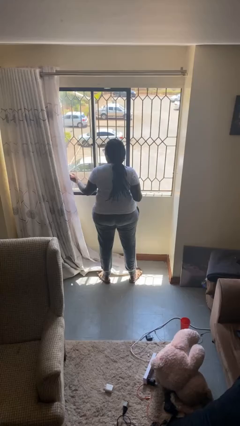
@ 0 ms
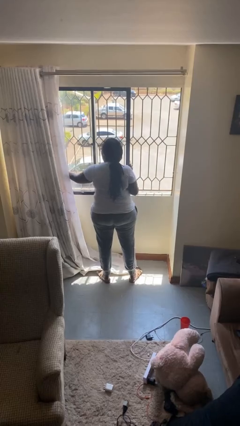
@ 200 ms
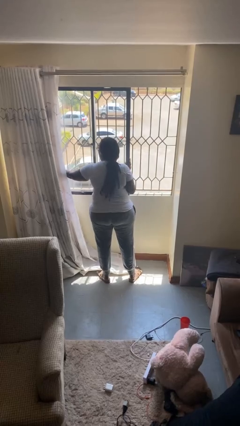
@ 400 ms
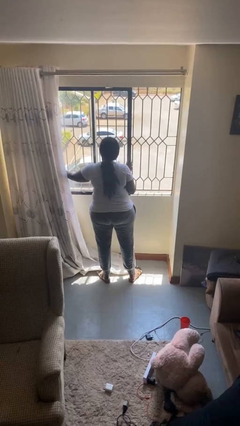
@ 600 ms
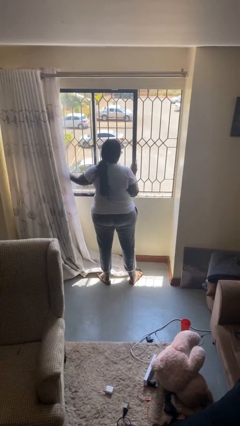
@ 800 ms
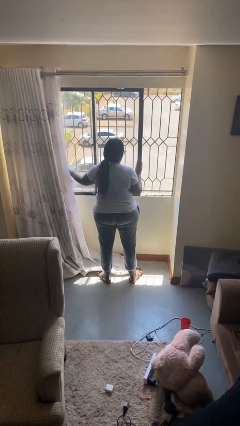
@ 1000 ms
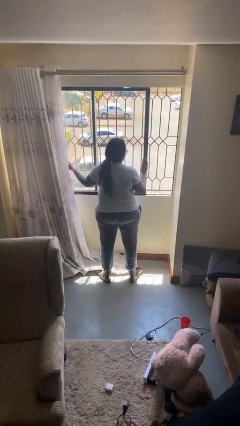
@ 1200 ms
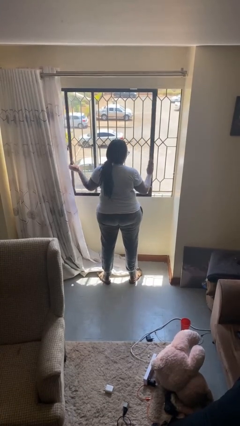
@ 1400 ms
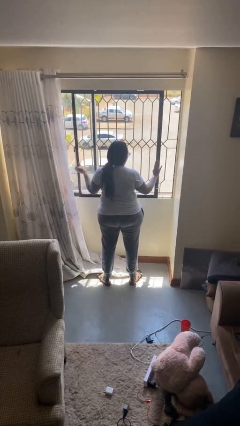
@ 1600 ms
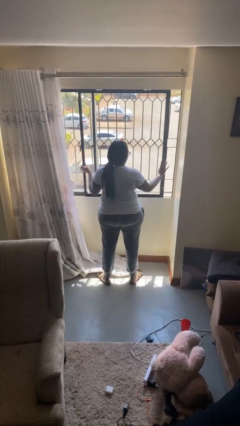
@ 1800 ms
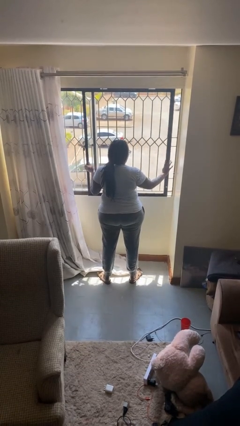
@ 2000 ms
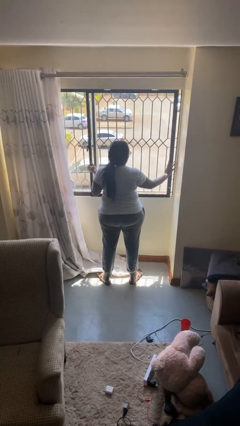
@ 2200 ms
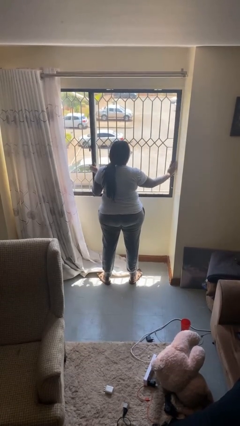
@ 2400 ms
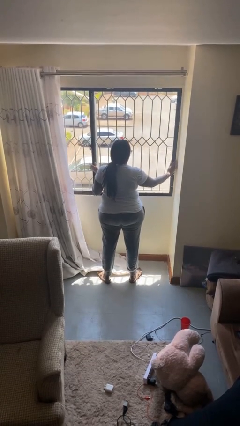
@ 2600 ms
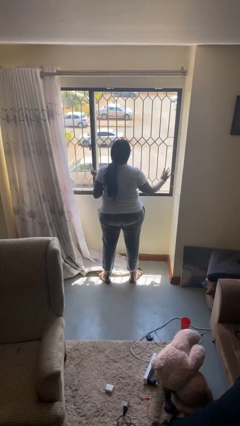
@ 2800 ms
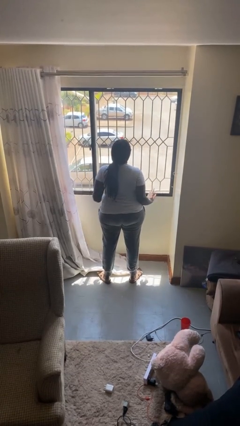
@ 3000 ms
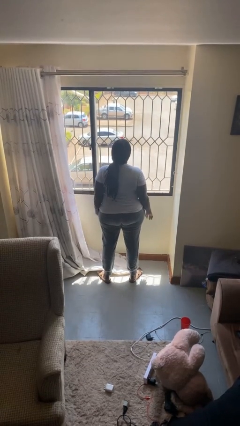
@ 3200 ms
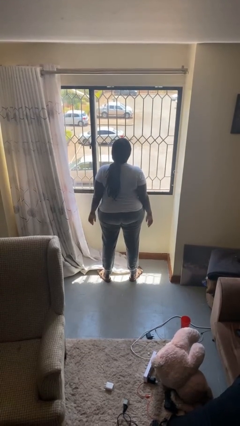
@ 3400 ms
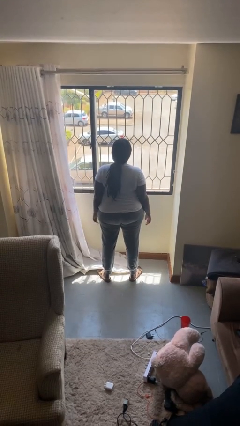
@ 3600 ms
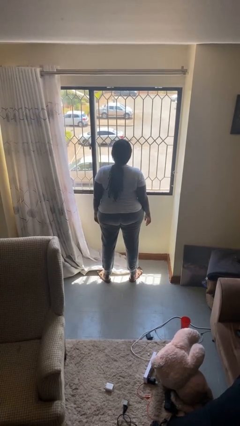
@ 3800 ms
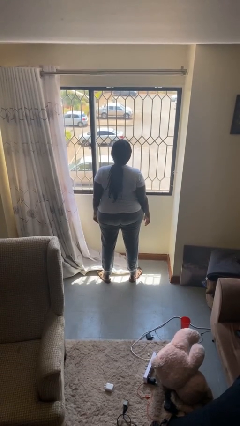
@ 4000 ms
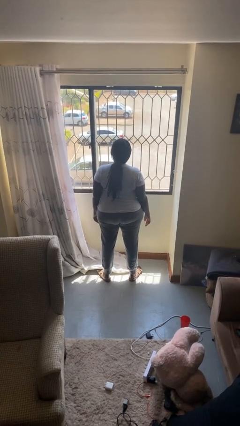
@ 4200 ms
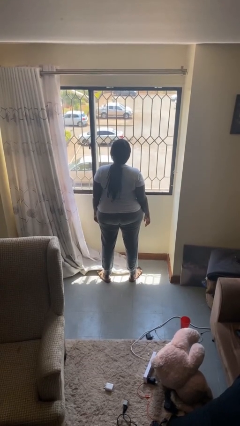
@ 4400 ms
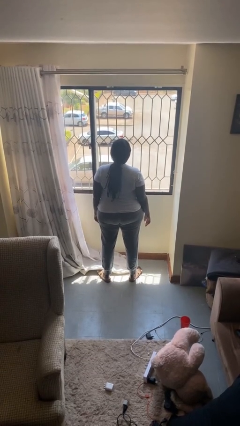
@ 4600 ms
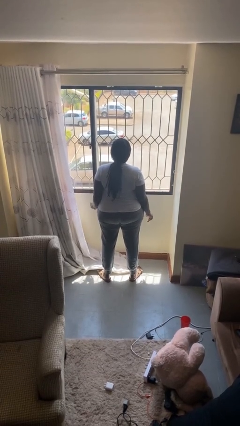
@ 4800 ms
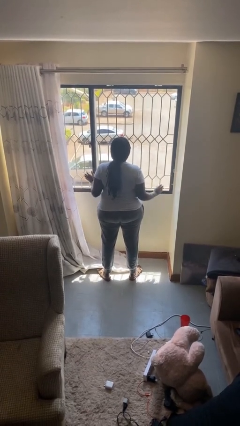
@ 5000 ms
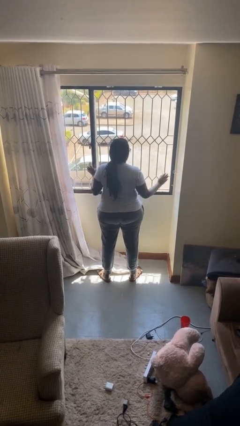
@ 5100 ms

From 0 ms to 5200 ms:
person closes home window

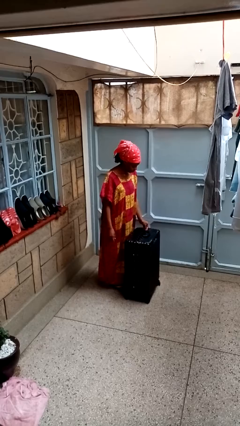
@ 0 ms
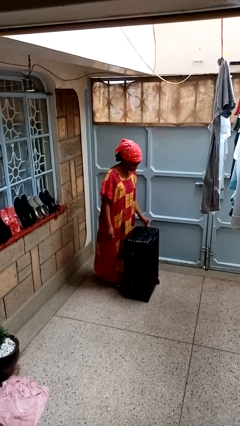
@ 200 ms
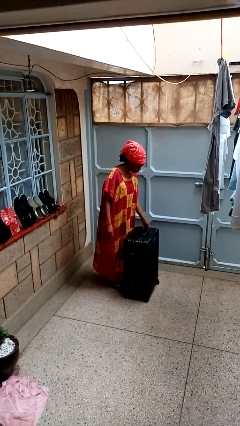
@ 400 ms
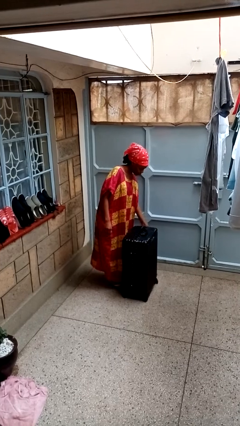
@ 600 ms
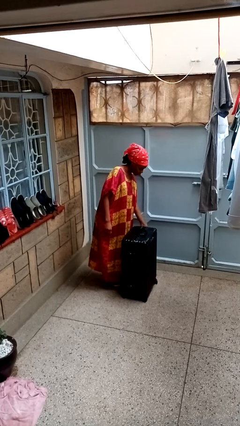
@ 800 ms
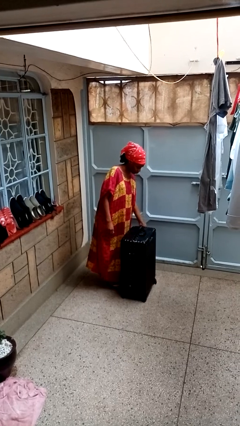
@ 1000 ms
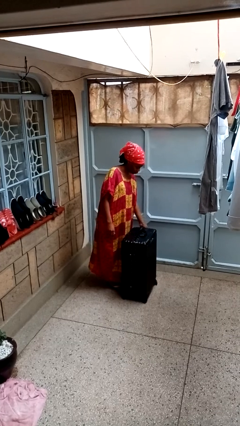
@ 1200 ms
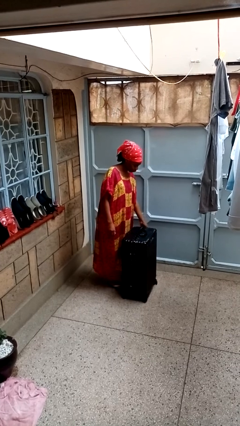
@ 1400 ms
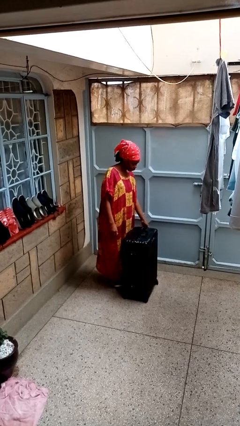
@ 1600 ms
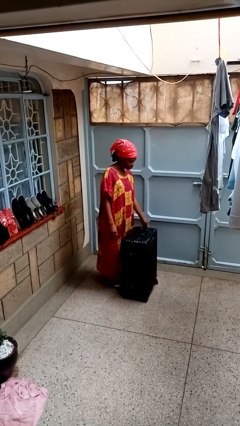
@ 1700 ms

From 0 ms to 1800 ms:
person closes suitcase

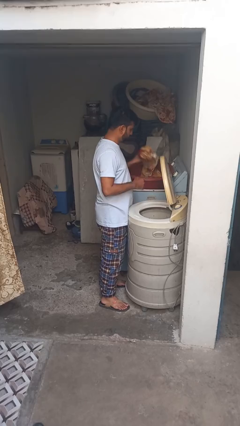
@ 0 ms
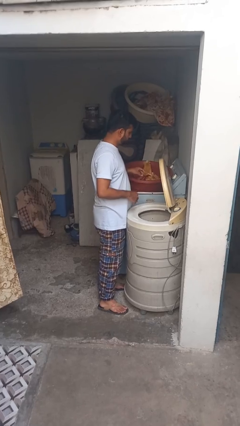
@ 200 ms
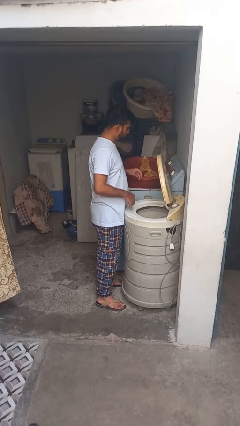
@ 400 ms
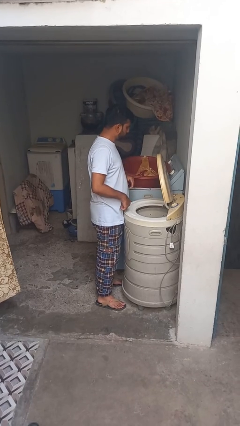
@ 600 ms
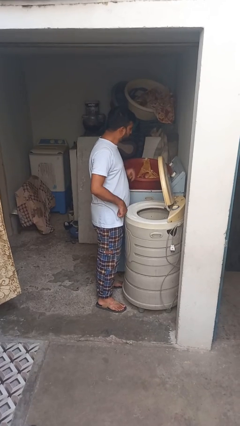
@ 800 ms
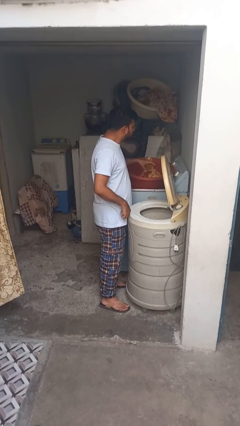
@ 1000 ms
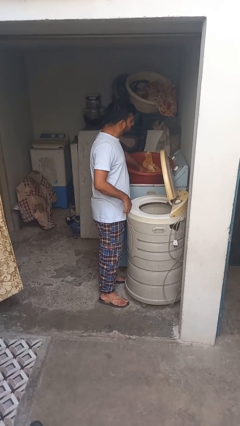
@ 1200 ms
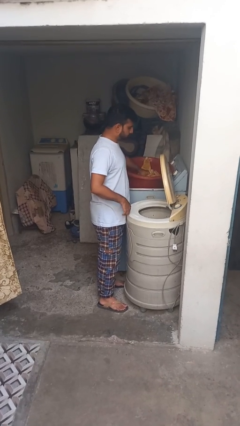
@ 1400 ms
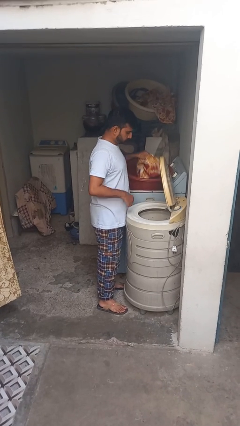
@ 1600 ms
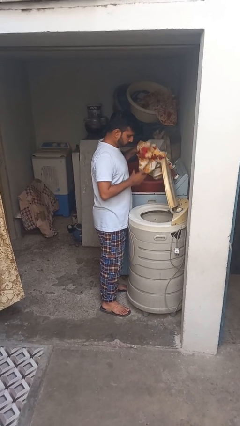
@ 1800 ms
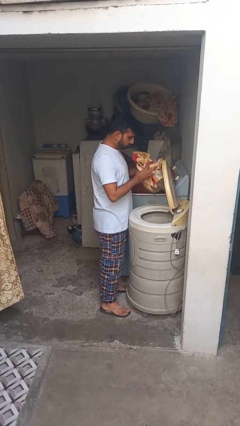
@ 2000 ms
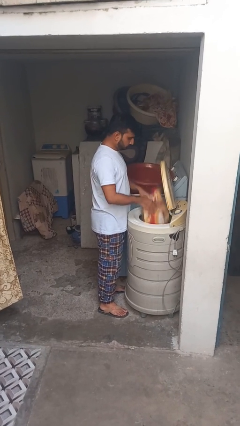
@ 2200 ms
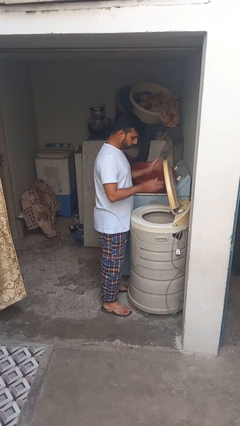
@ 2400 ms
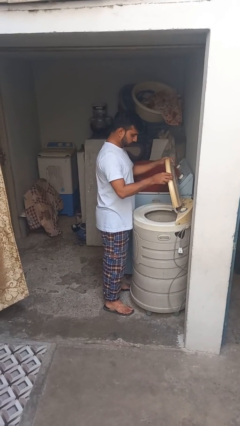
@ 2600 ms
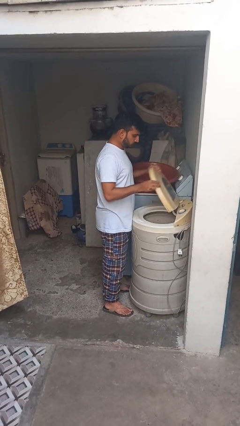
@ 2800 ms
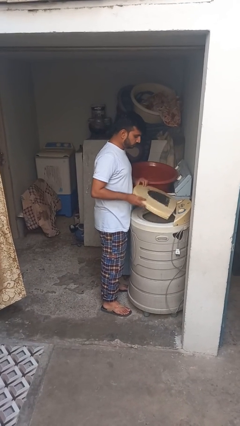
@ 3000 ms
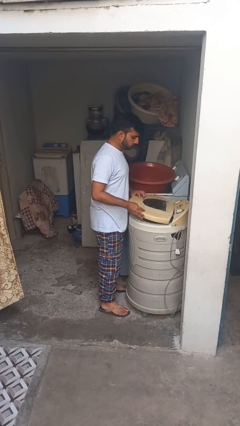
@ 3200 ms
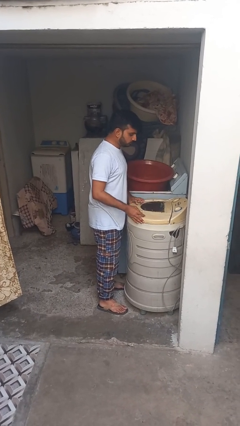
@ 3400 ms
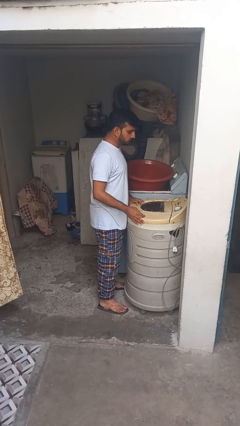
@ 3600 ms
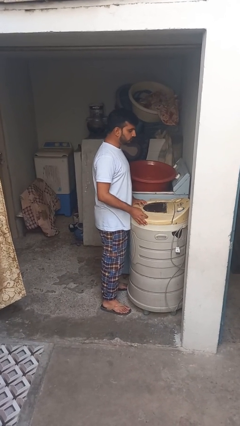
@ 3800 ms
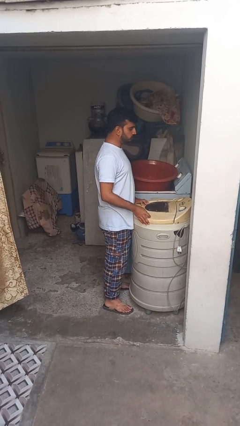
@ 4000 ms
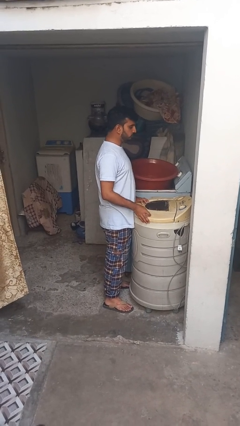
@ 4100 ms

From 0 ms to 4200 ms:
person loads clotheswasher

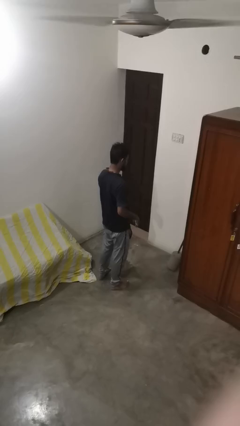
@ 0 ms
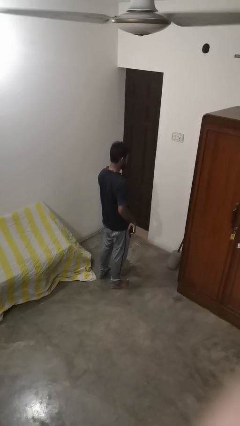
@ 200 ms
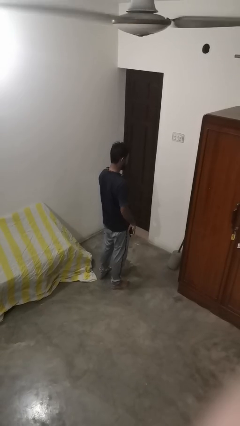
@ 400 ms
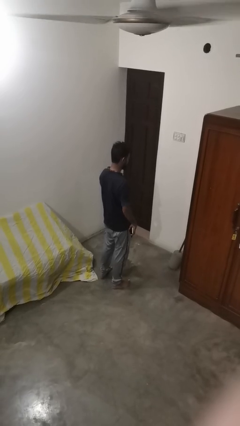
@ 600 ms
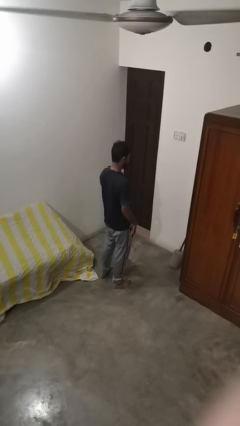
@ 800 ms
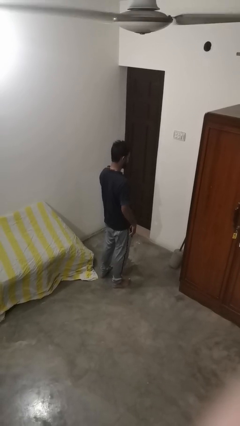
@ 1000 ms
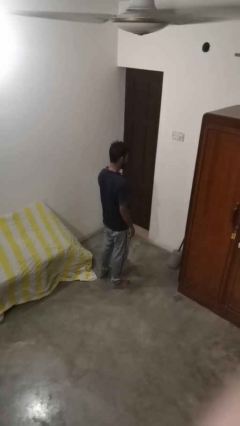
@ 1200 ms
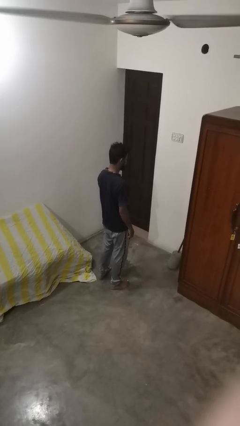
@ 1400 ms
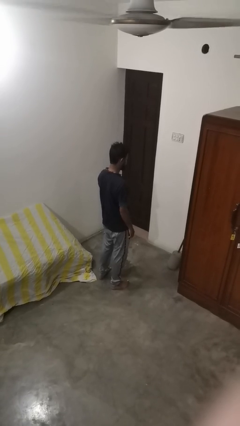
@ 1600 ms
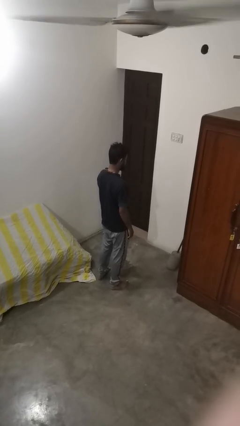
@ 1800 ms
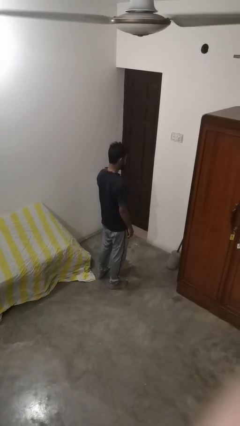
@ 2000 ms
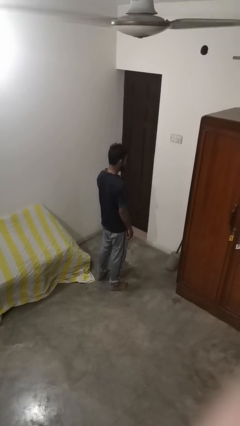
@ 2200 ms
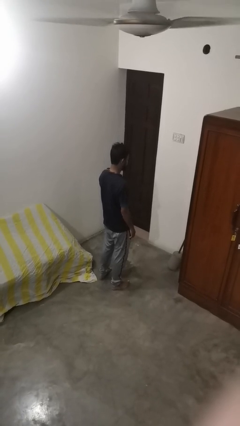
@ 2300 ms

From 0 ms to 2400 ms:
person puts phone into pocket

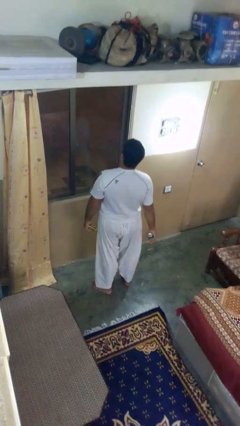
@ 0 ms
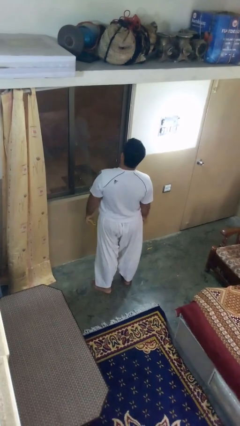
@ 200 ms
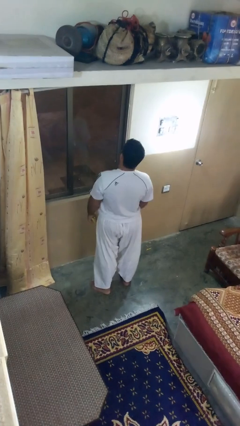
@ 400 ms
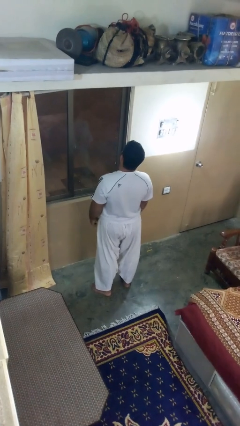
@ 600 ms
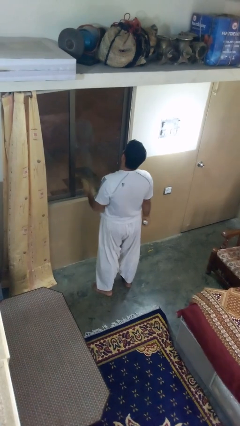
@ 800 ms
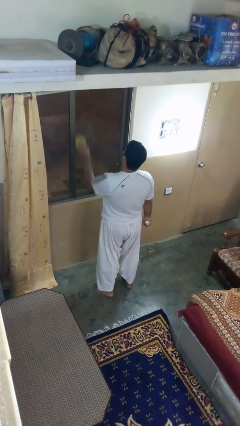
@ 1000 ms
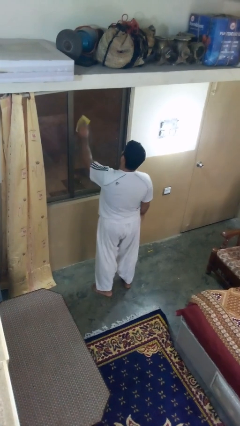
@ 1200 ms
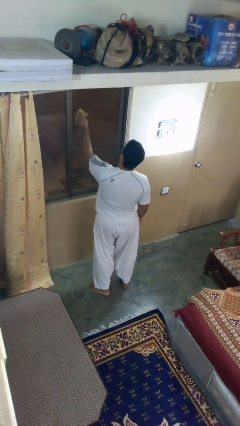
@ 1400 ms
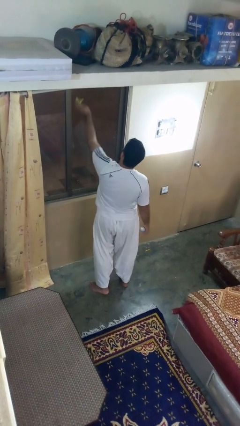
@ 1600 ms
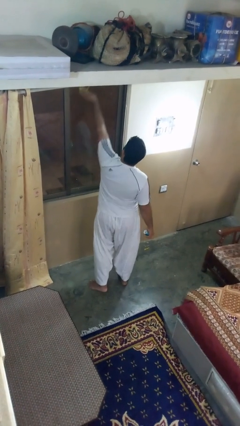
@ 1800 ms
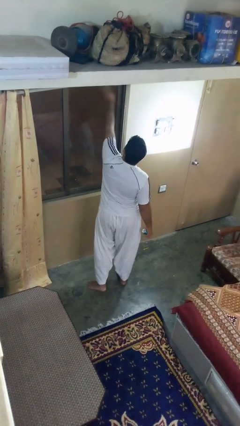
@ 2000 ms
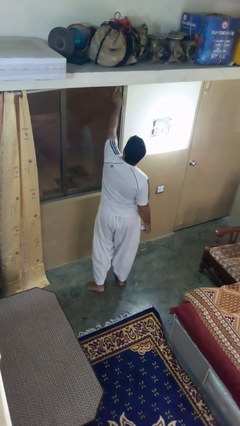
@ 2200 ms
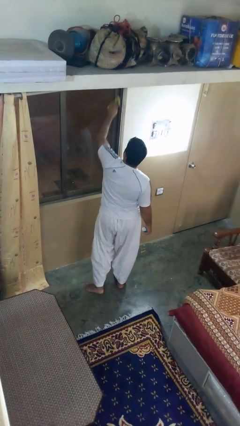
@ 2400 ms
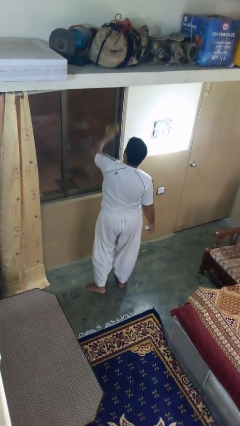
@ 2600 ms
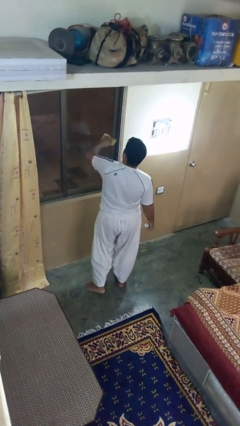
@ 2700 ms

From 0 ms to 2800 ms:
person washes window

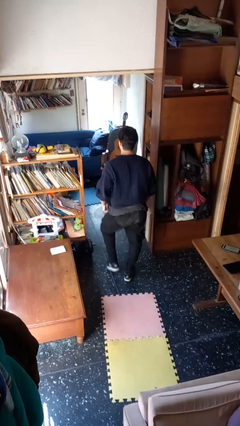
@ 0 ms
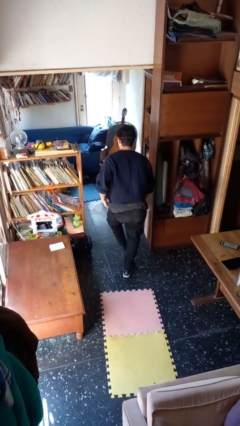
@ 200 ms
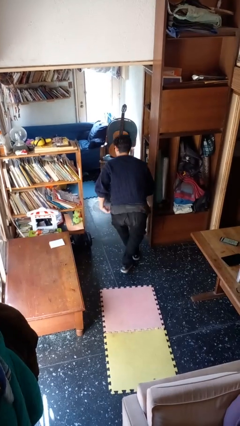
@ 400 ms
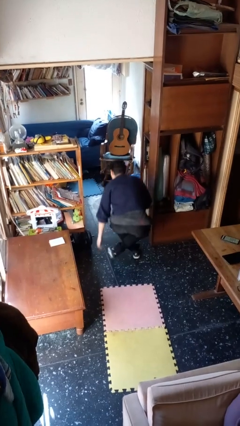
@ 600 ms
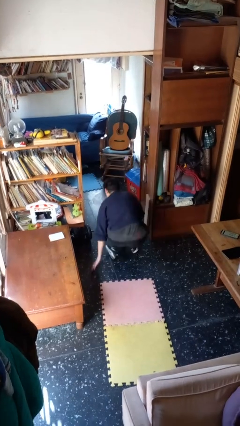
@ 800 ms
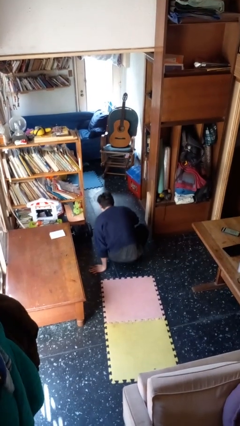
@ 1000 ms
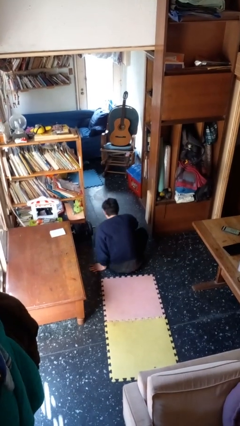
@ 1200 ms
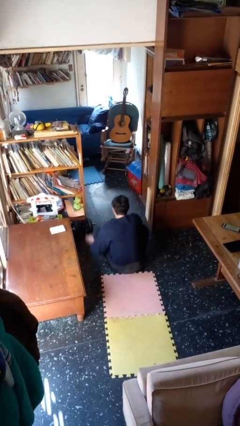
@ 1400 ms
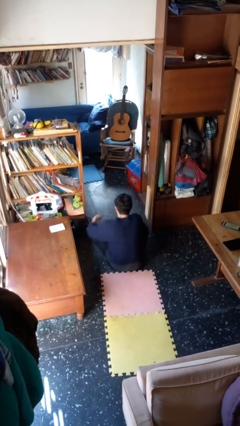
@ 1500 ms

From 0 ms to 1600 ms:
person sits crisscross
